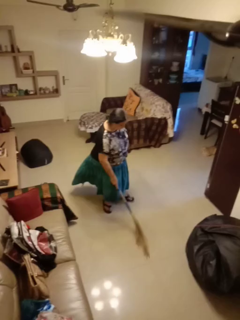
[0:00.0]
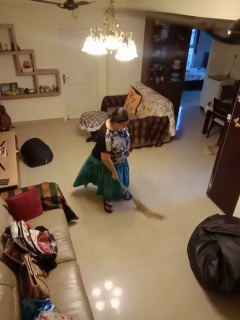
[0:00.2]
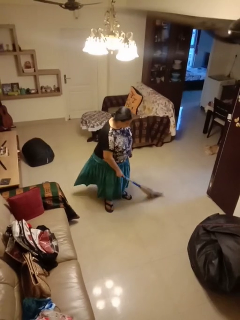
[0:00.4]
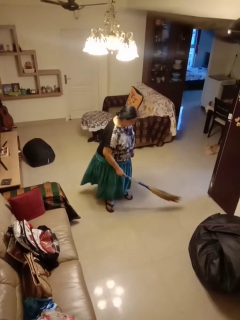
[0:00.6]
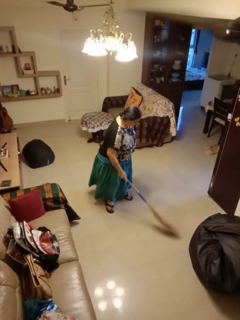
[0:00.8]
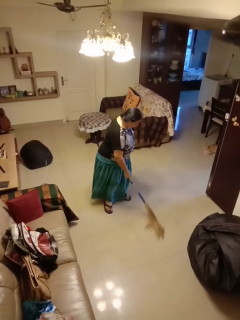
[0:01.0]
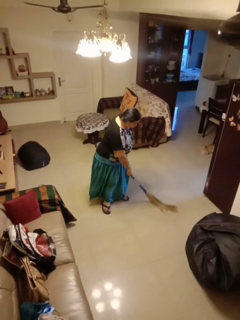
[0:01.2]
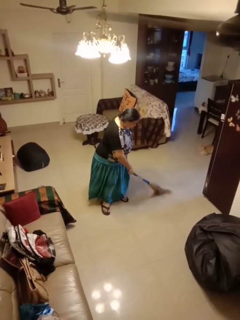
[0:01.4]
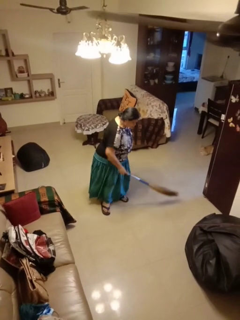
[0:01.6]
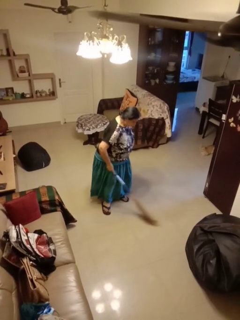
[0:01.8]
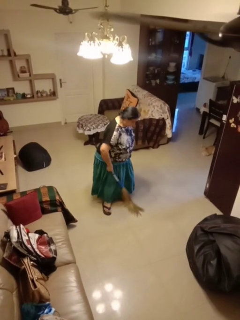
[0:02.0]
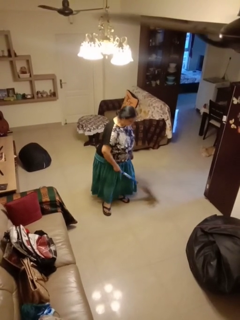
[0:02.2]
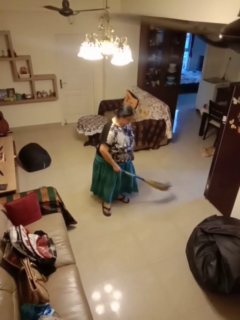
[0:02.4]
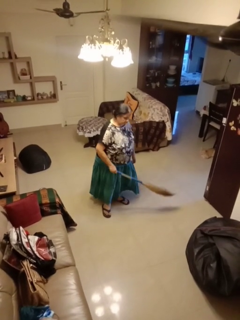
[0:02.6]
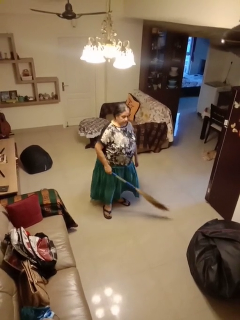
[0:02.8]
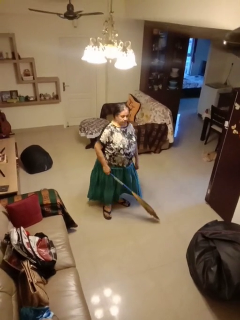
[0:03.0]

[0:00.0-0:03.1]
person sweeps floor

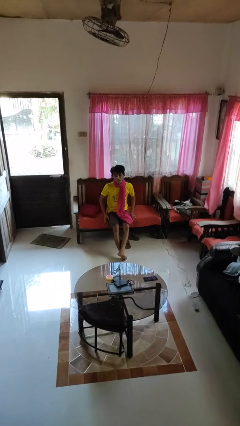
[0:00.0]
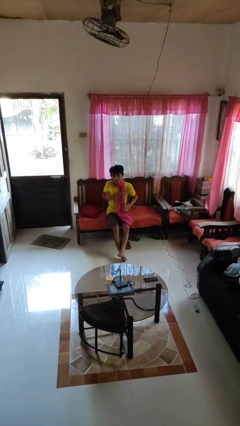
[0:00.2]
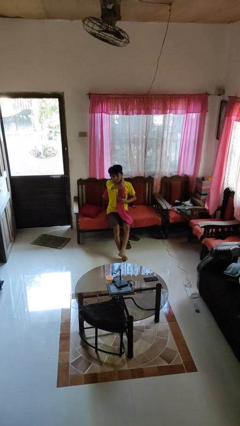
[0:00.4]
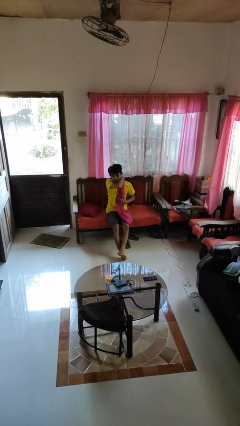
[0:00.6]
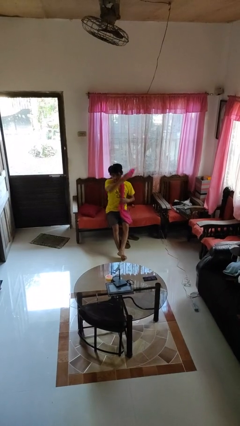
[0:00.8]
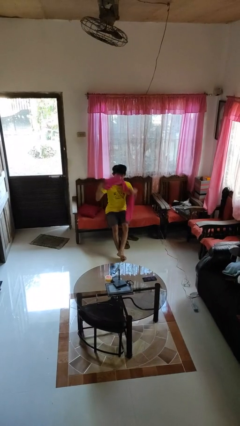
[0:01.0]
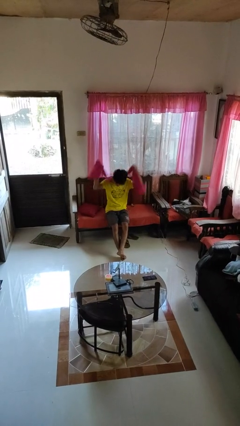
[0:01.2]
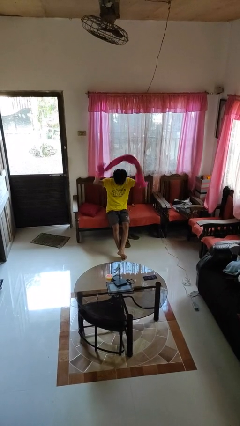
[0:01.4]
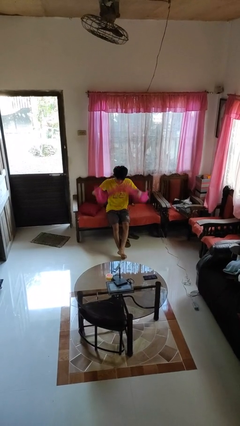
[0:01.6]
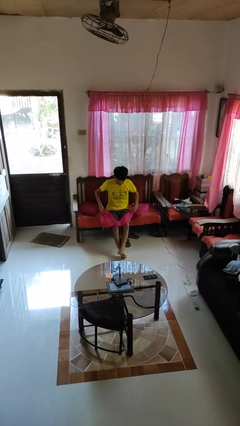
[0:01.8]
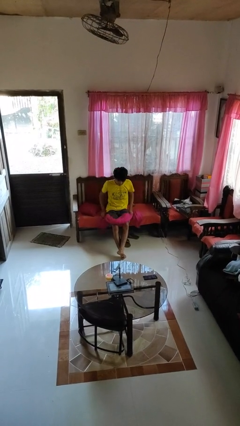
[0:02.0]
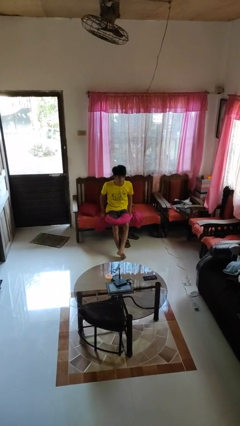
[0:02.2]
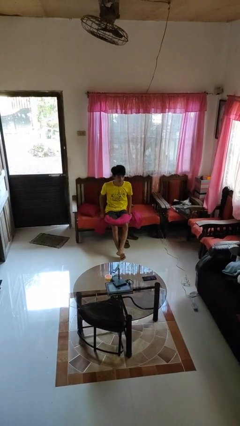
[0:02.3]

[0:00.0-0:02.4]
person takes off scarf

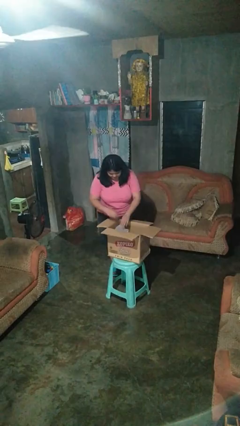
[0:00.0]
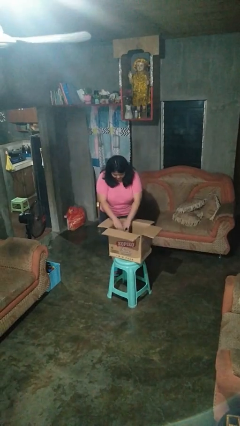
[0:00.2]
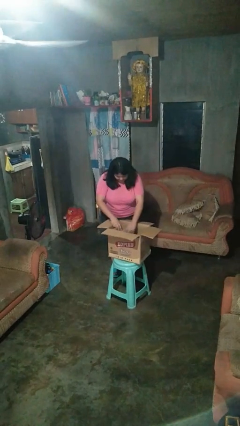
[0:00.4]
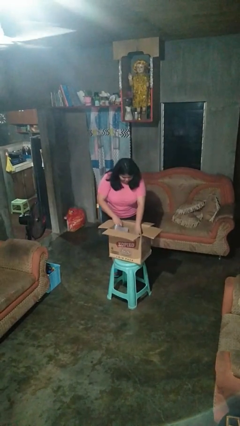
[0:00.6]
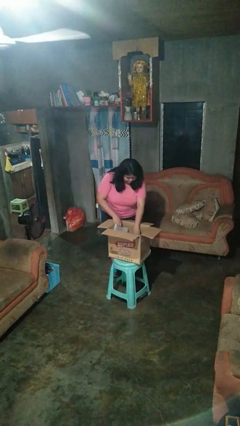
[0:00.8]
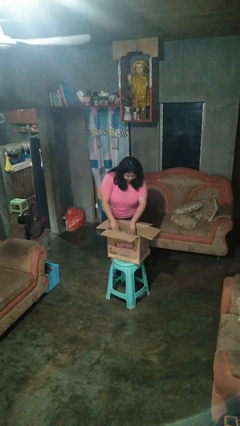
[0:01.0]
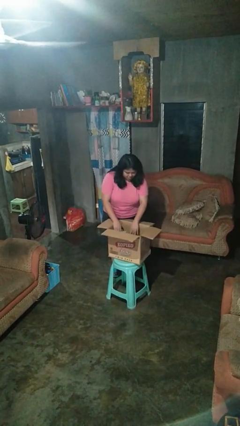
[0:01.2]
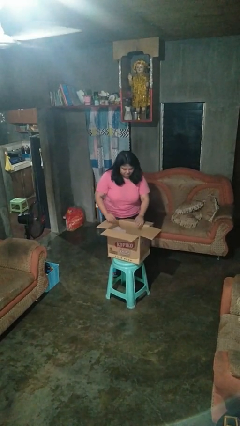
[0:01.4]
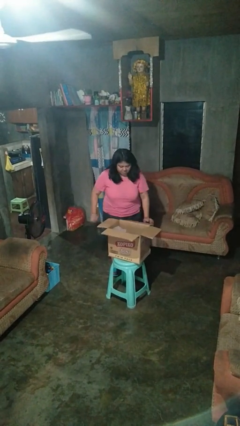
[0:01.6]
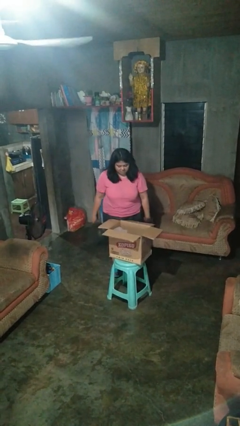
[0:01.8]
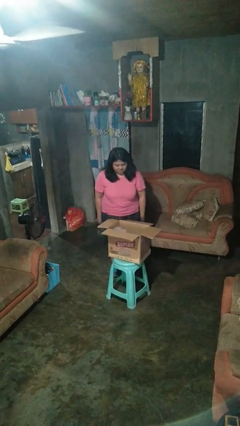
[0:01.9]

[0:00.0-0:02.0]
person searches in box

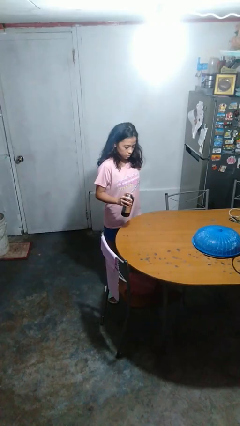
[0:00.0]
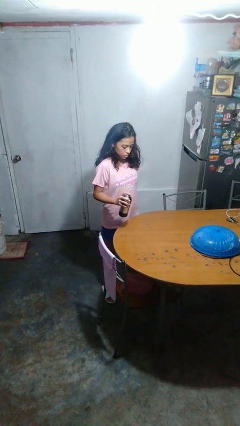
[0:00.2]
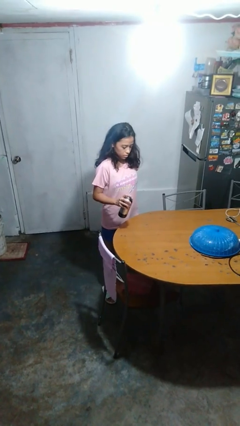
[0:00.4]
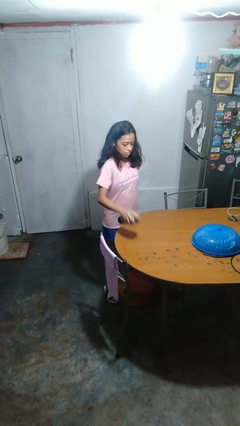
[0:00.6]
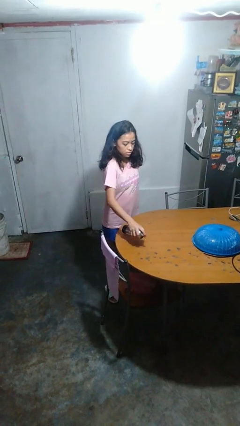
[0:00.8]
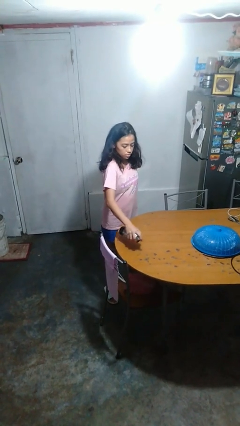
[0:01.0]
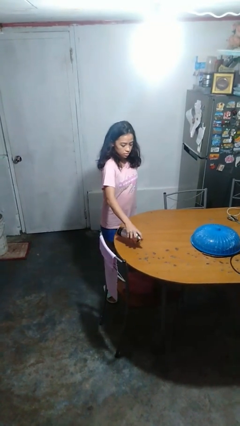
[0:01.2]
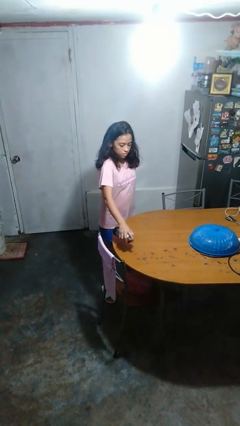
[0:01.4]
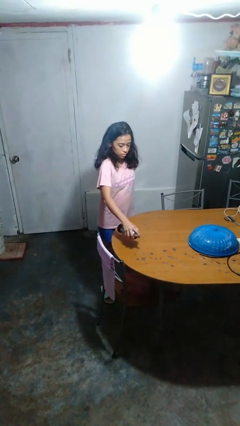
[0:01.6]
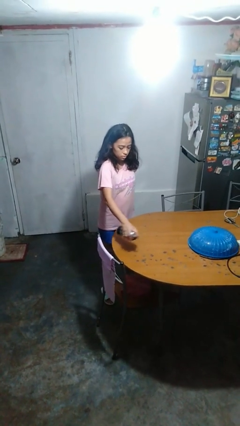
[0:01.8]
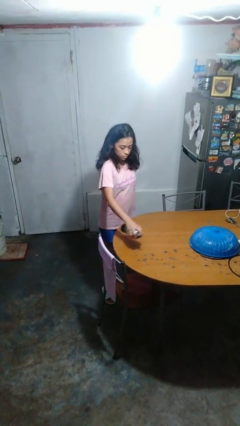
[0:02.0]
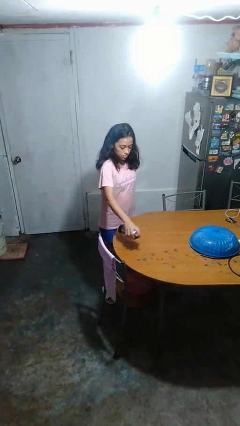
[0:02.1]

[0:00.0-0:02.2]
person sprays from bottle

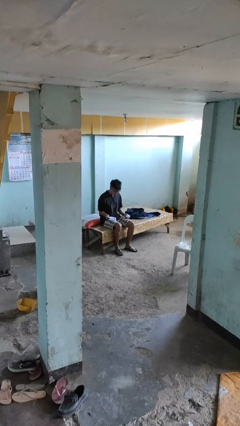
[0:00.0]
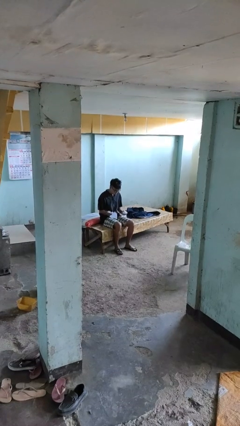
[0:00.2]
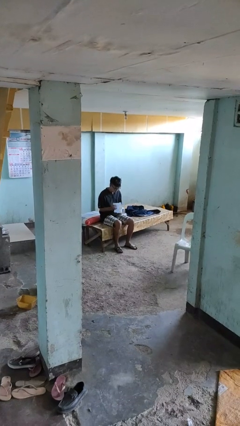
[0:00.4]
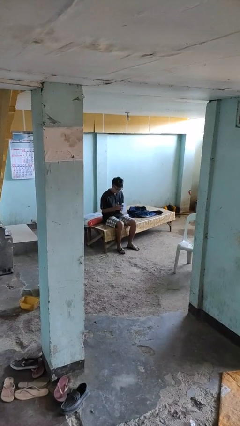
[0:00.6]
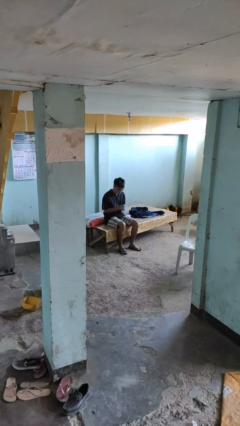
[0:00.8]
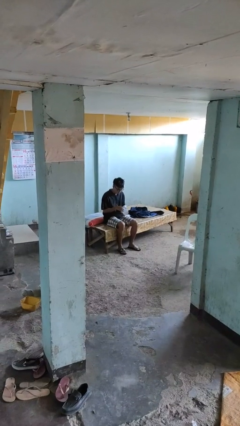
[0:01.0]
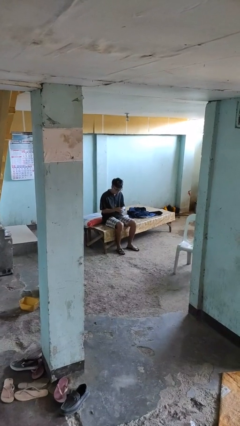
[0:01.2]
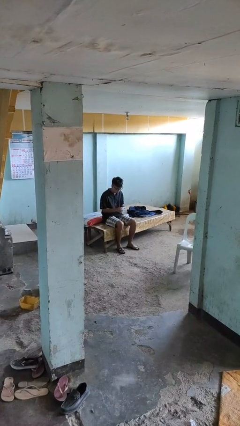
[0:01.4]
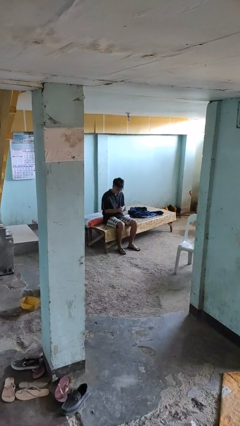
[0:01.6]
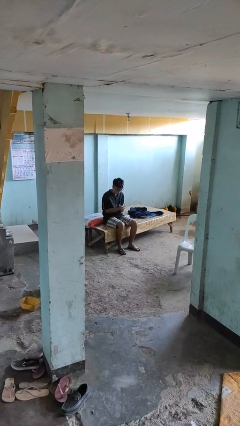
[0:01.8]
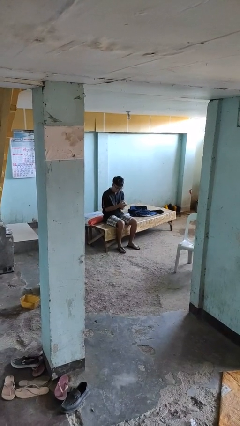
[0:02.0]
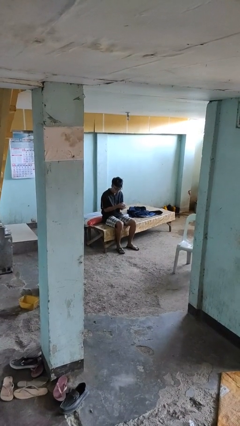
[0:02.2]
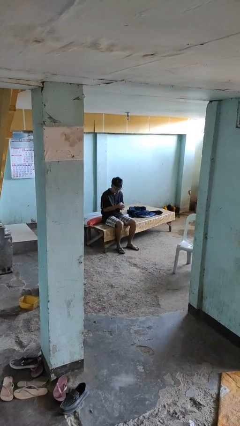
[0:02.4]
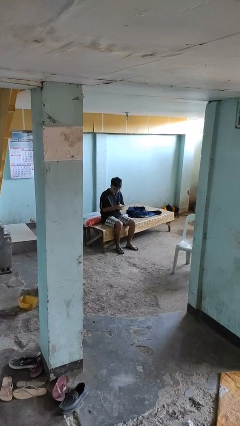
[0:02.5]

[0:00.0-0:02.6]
person crumples paper

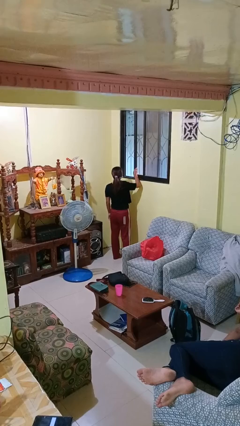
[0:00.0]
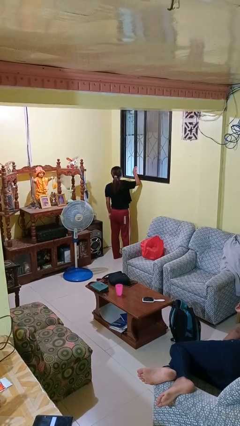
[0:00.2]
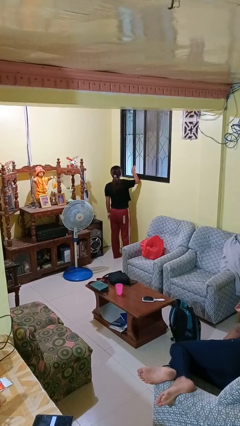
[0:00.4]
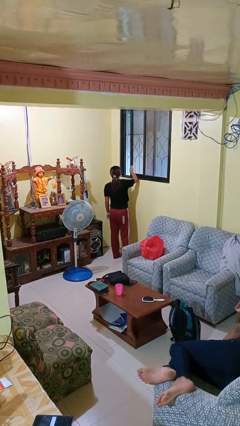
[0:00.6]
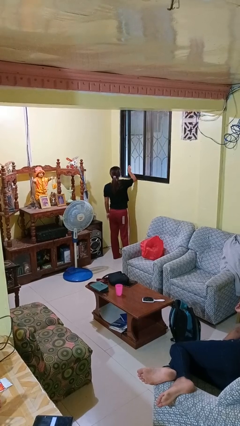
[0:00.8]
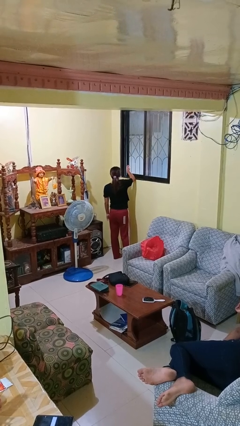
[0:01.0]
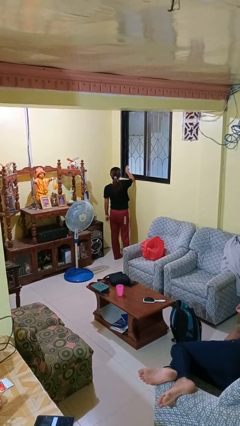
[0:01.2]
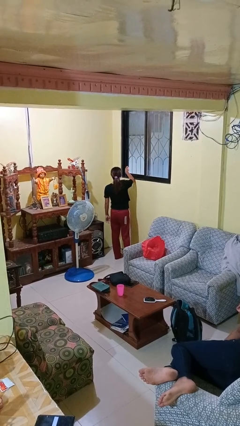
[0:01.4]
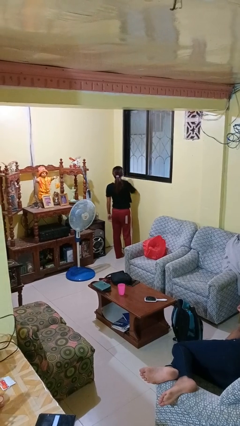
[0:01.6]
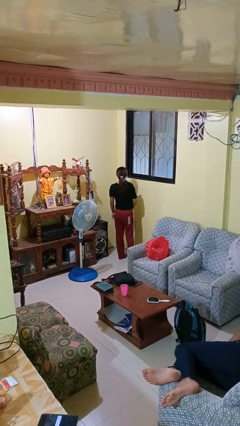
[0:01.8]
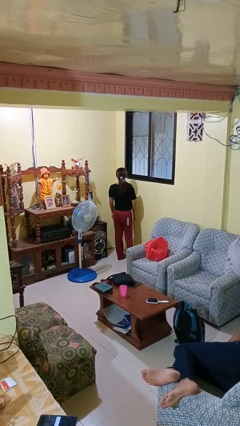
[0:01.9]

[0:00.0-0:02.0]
person closes home window

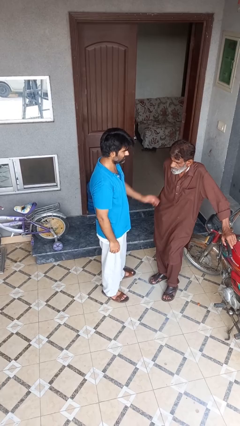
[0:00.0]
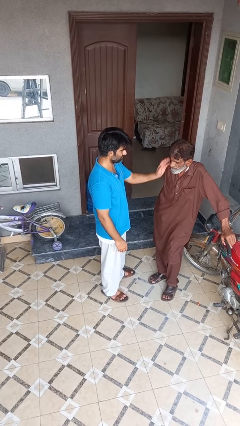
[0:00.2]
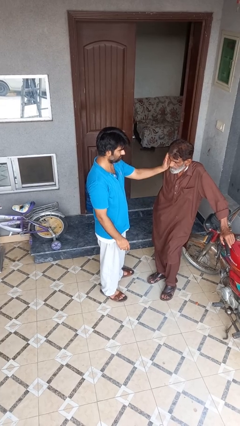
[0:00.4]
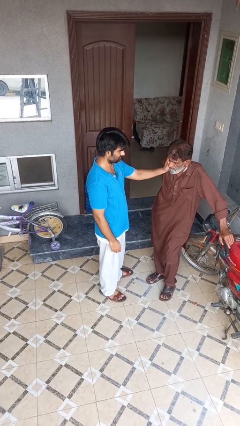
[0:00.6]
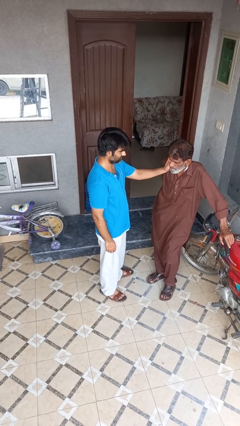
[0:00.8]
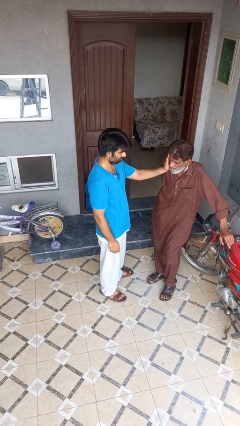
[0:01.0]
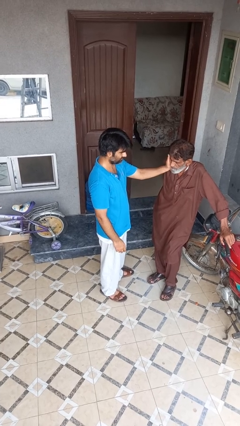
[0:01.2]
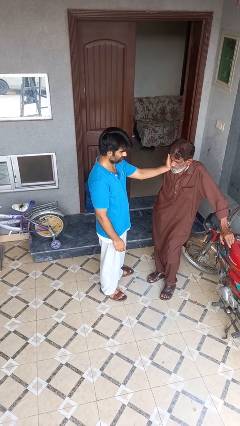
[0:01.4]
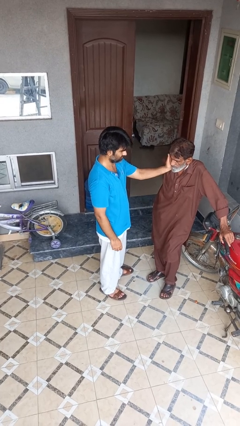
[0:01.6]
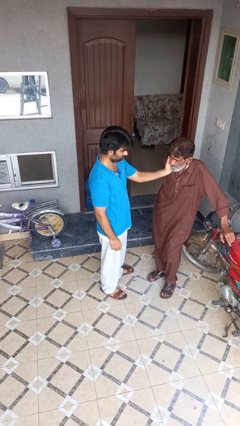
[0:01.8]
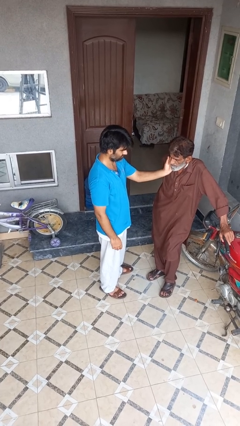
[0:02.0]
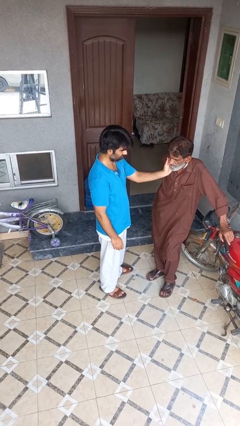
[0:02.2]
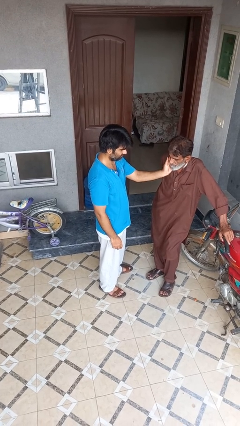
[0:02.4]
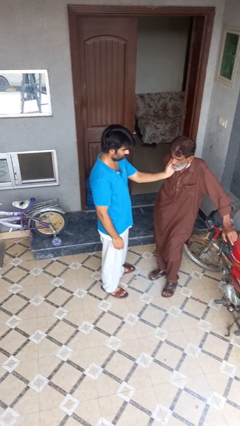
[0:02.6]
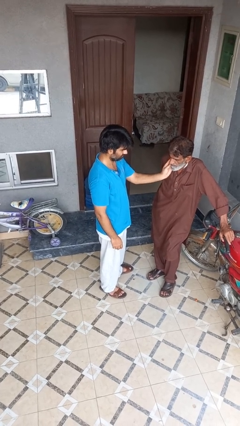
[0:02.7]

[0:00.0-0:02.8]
person touches face of person

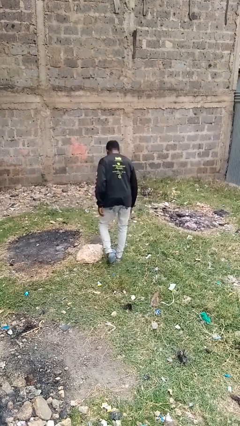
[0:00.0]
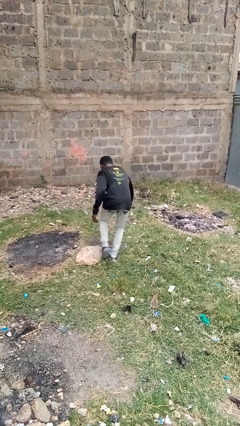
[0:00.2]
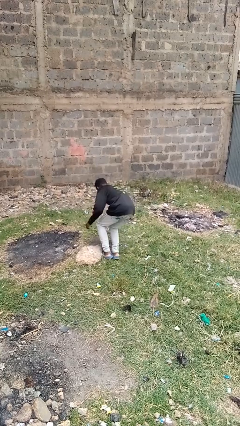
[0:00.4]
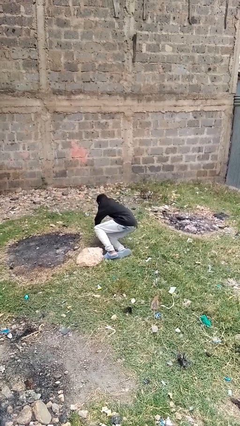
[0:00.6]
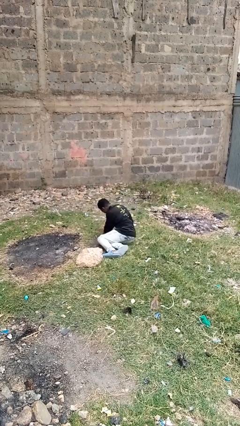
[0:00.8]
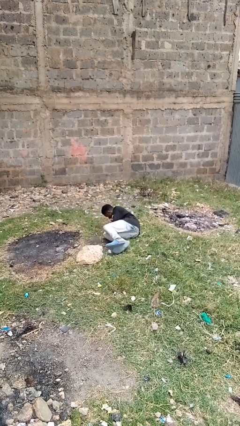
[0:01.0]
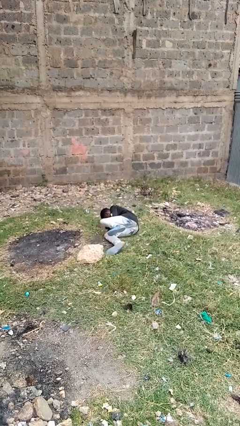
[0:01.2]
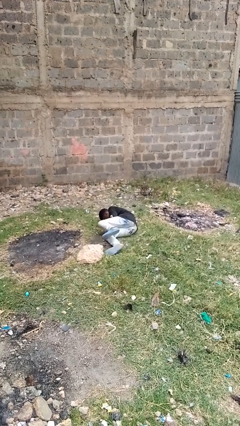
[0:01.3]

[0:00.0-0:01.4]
person trips on object on floor
